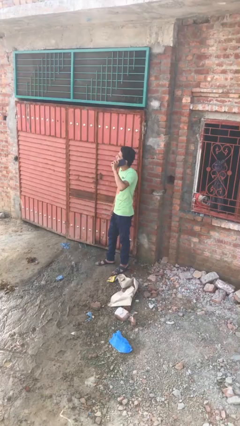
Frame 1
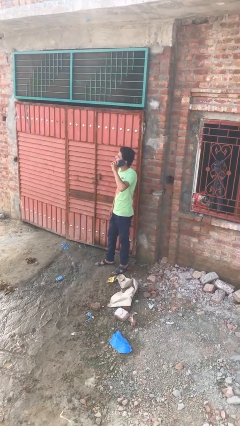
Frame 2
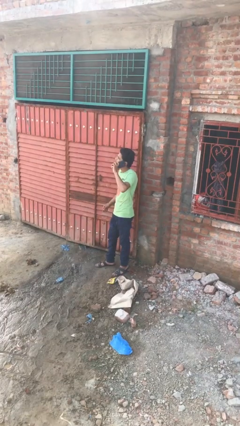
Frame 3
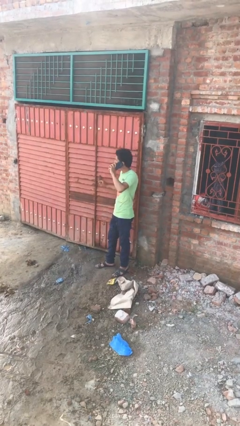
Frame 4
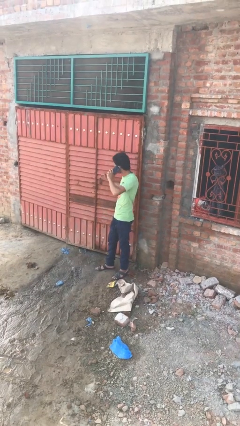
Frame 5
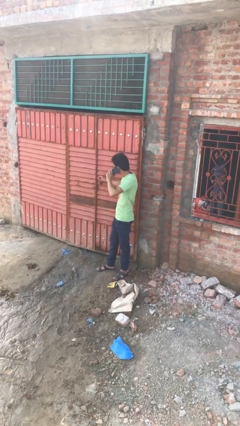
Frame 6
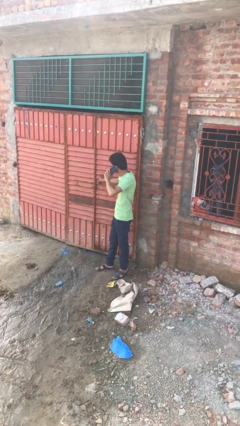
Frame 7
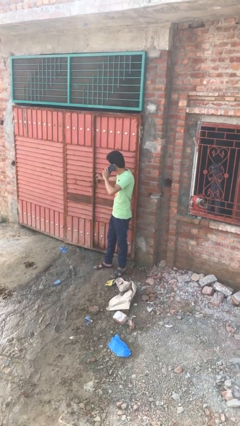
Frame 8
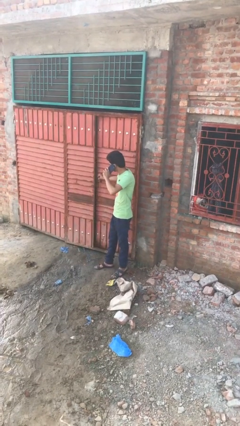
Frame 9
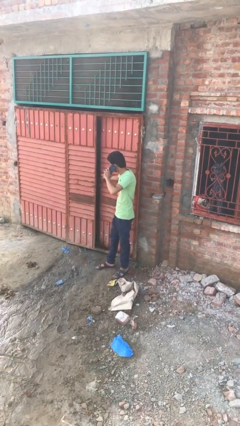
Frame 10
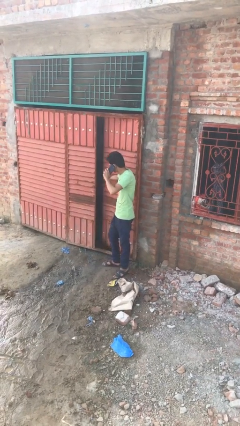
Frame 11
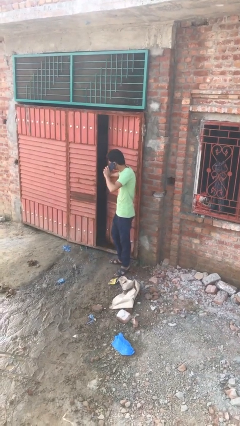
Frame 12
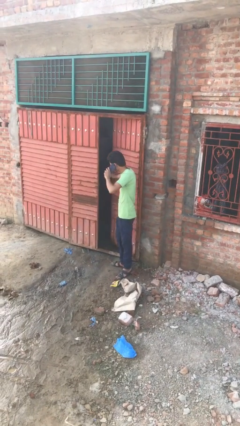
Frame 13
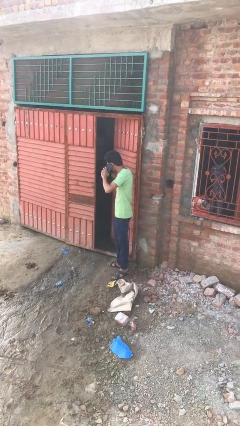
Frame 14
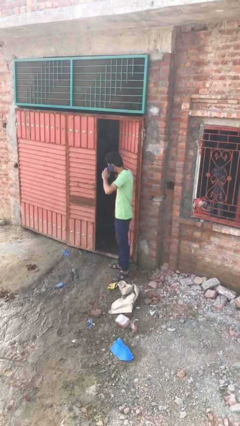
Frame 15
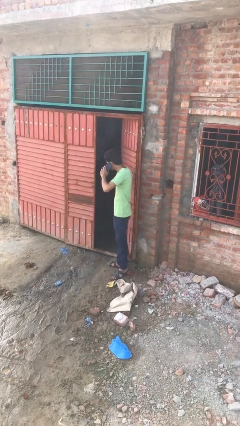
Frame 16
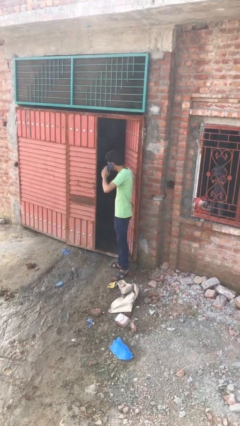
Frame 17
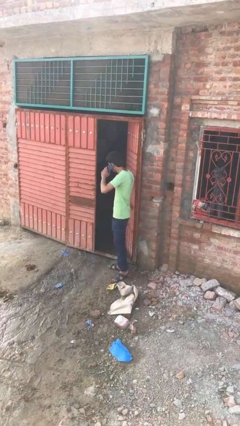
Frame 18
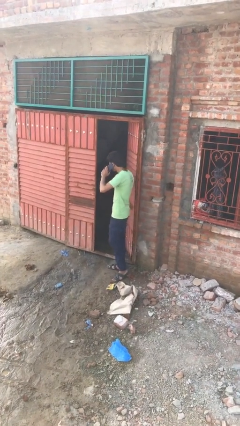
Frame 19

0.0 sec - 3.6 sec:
person opens facility door

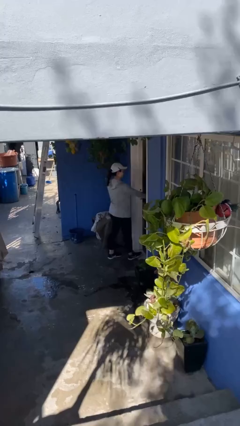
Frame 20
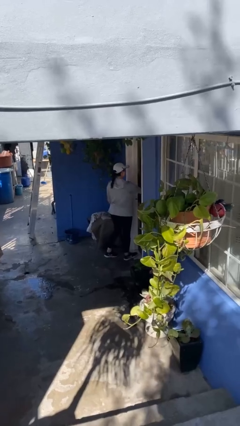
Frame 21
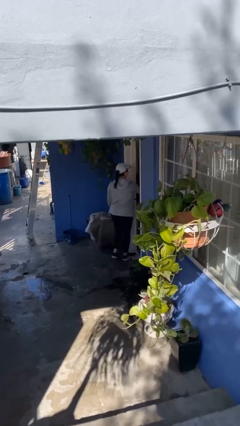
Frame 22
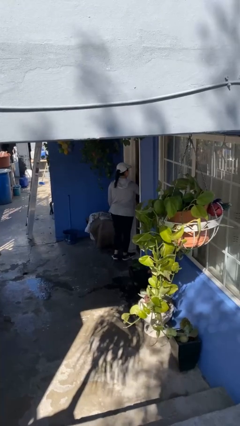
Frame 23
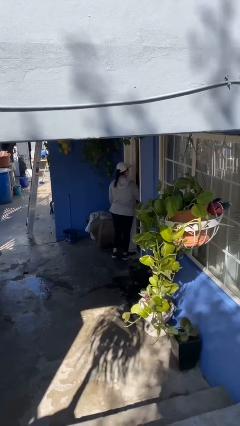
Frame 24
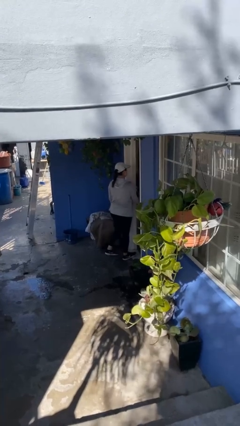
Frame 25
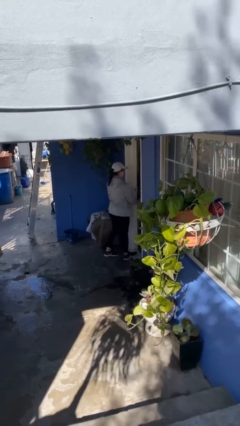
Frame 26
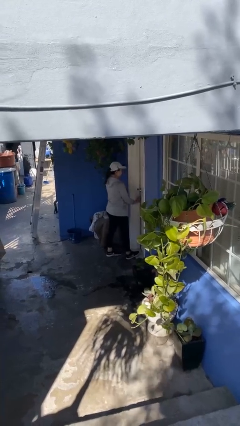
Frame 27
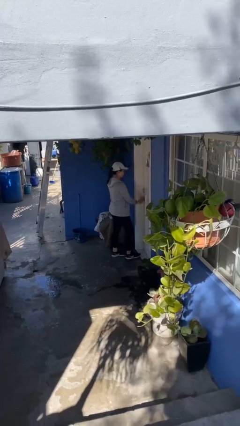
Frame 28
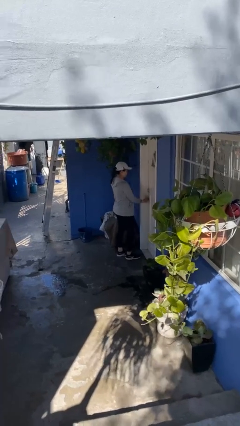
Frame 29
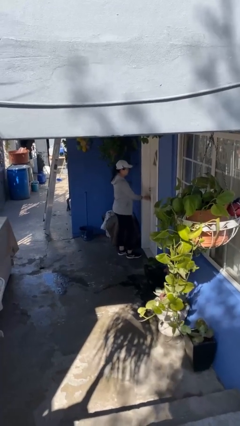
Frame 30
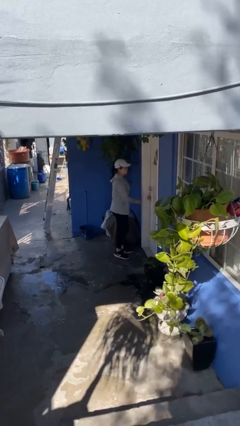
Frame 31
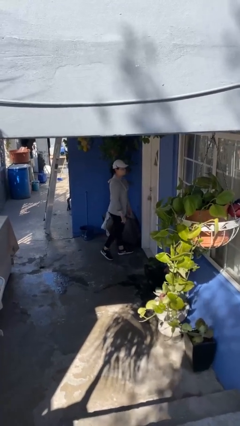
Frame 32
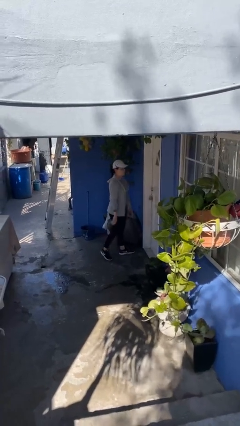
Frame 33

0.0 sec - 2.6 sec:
person closes facility door

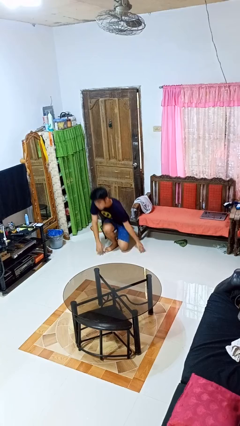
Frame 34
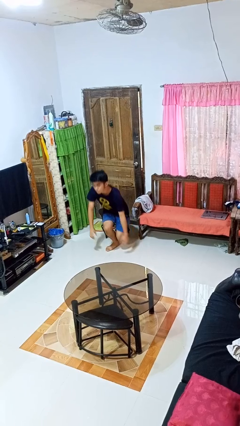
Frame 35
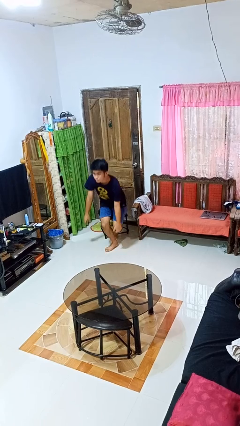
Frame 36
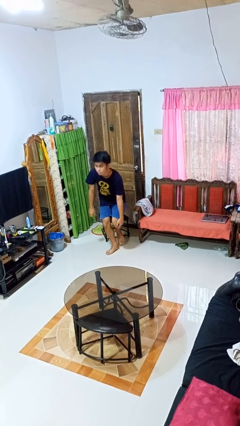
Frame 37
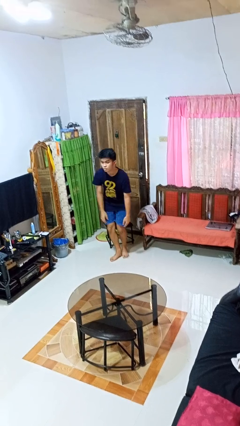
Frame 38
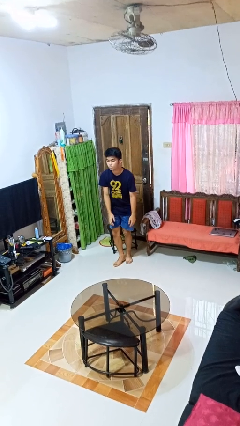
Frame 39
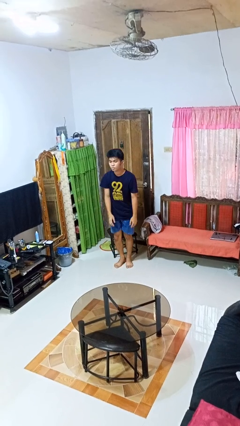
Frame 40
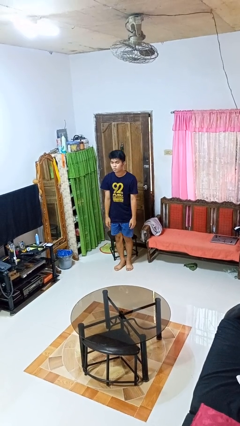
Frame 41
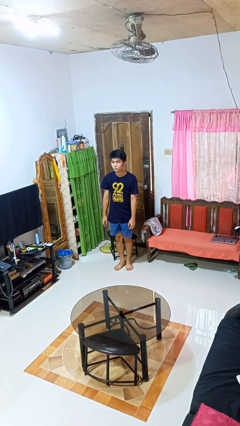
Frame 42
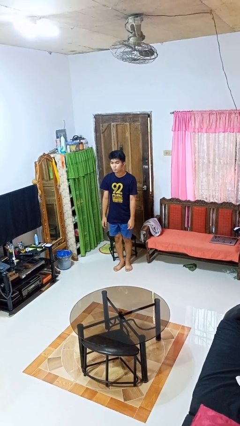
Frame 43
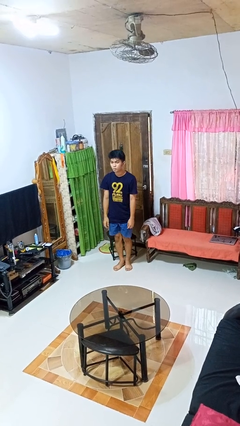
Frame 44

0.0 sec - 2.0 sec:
person stands up from floor

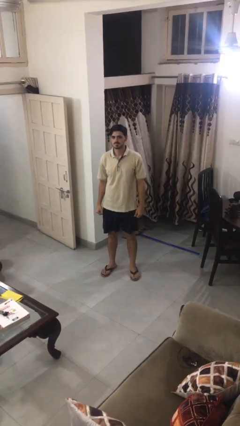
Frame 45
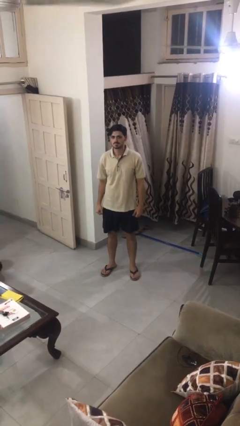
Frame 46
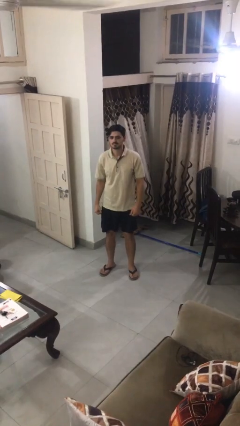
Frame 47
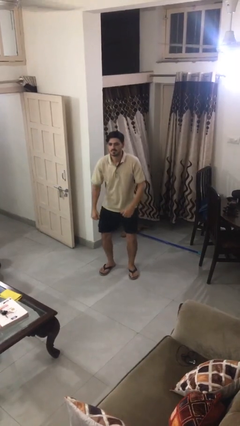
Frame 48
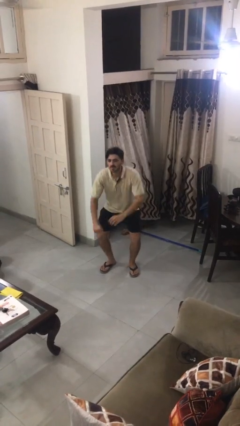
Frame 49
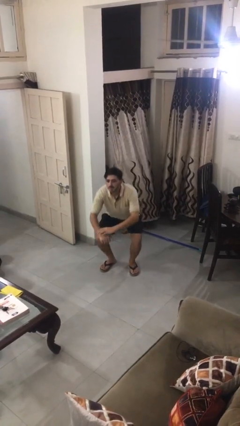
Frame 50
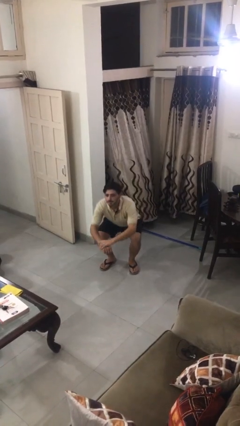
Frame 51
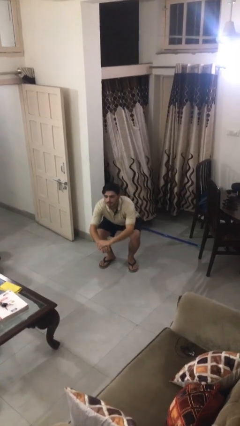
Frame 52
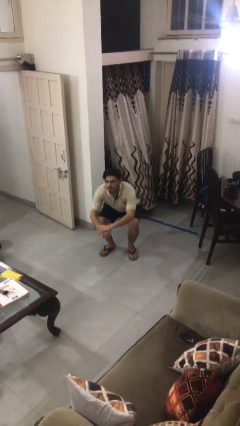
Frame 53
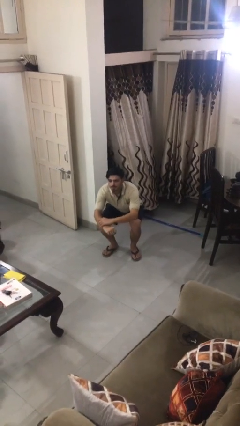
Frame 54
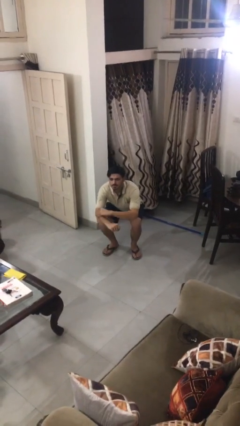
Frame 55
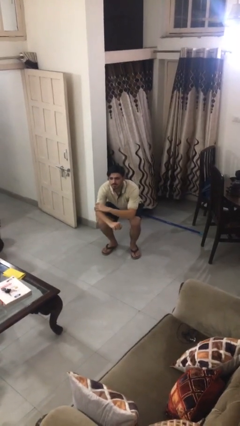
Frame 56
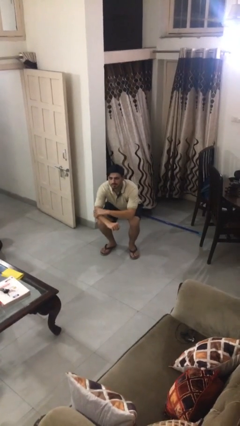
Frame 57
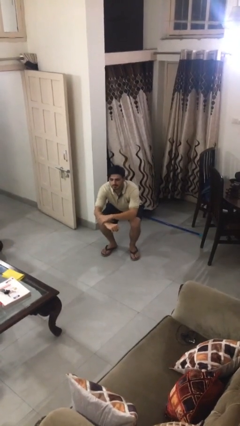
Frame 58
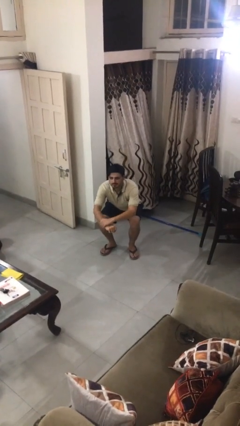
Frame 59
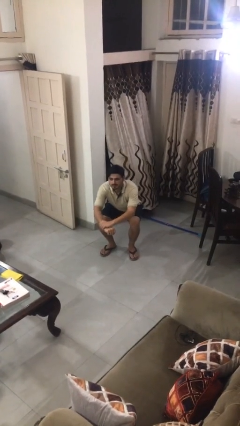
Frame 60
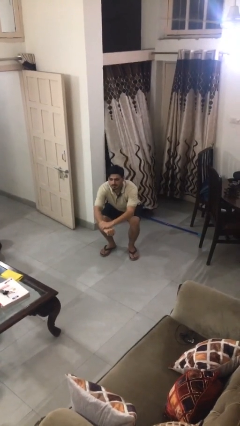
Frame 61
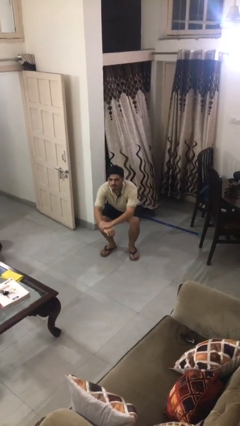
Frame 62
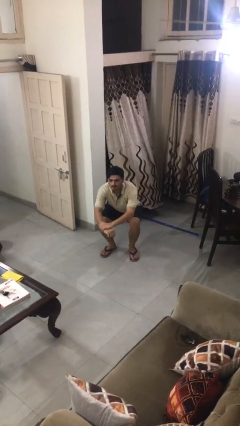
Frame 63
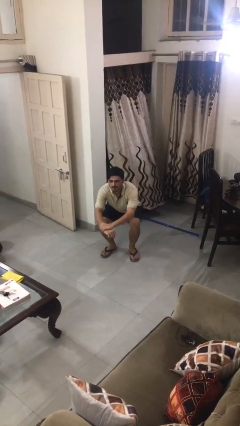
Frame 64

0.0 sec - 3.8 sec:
person squats

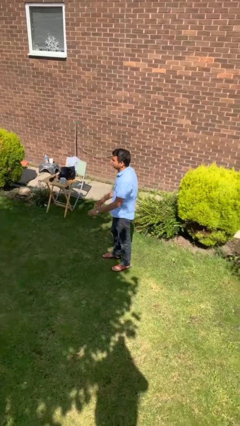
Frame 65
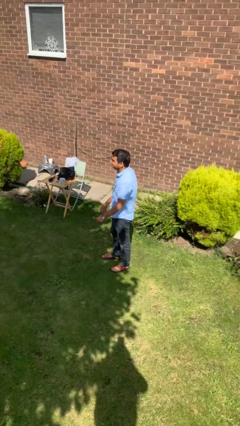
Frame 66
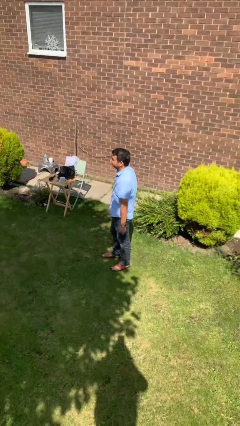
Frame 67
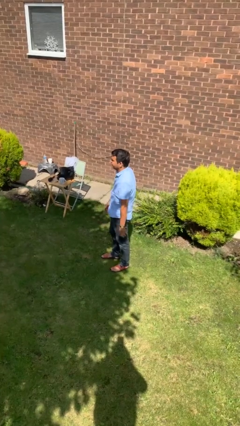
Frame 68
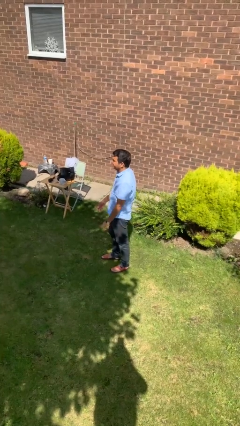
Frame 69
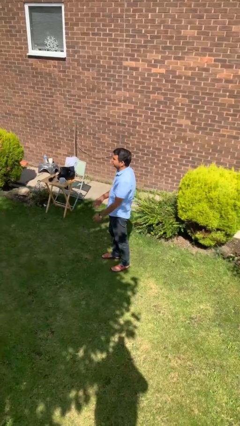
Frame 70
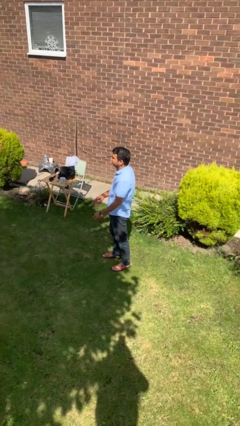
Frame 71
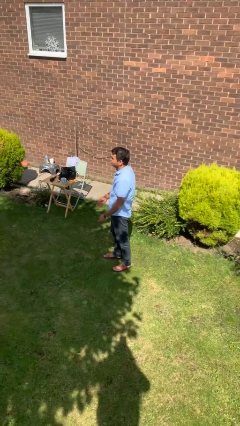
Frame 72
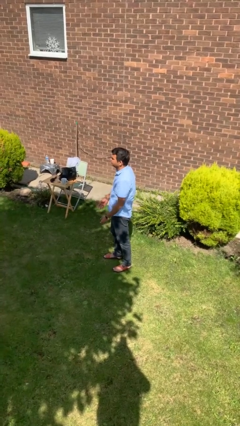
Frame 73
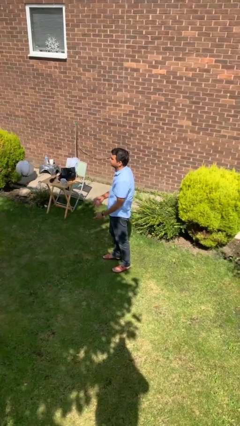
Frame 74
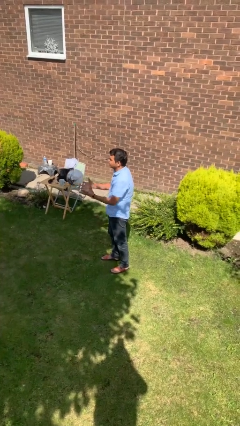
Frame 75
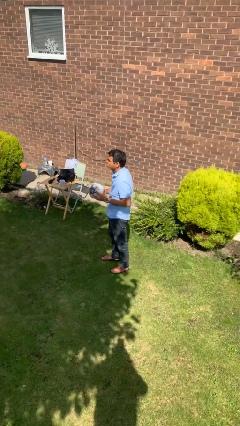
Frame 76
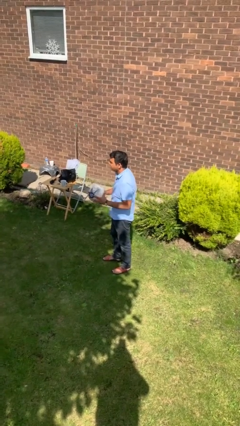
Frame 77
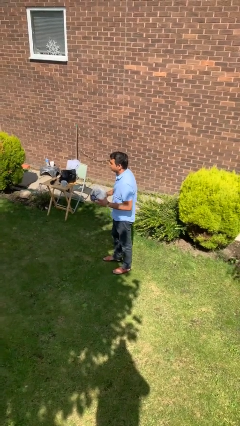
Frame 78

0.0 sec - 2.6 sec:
person catches object from person

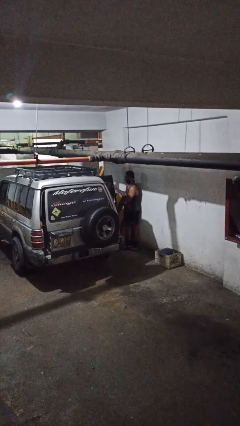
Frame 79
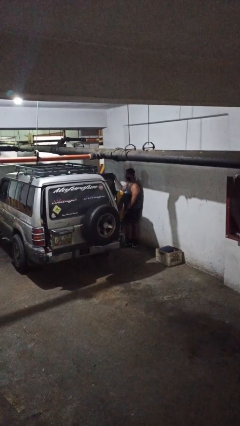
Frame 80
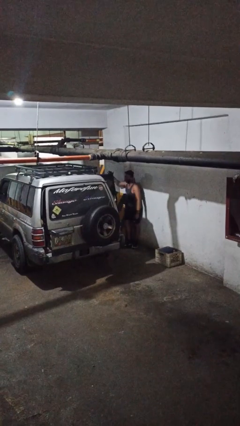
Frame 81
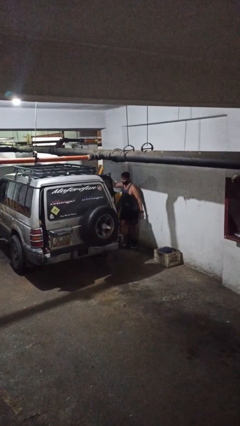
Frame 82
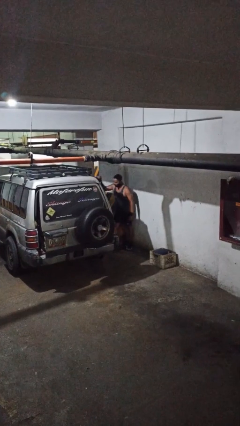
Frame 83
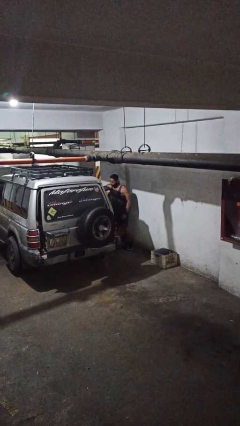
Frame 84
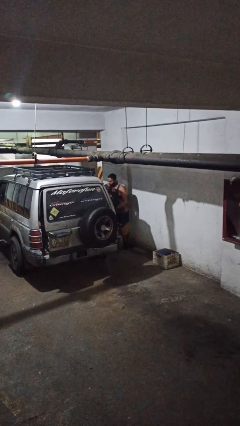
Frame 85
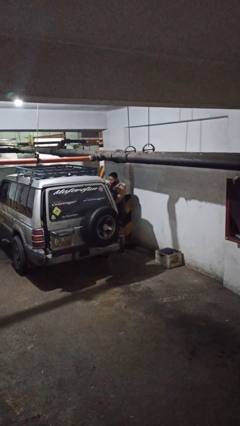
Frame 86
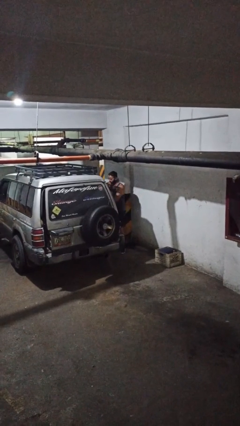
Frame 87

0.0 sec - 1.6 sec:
person closes car door

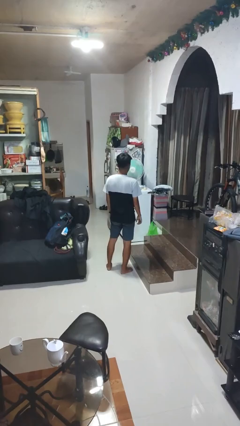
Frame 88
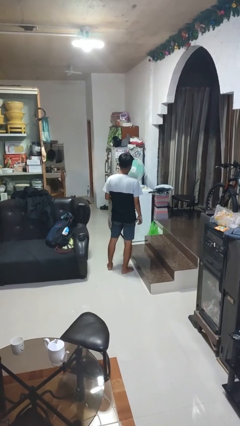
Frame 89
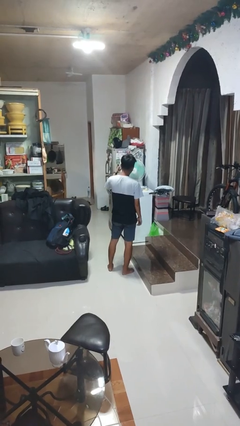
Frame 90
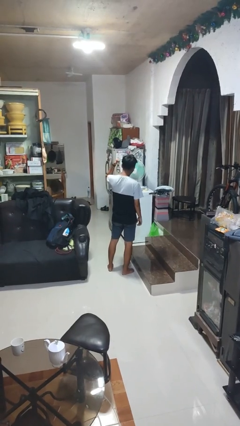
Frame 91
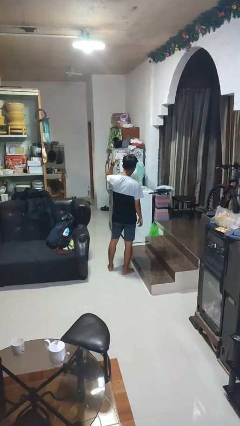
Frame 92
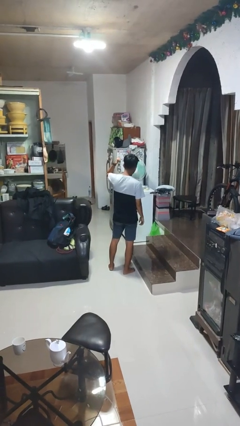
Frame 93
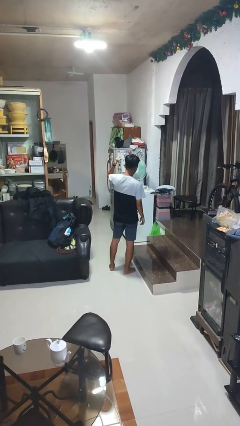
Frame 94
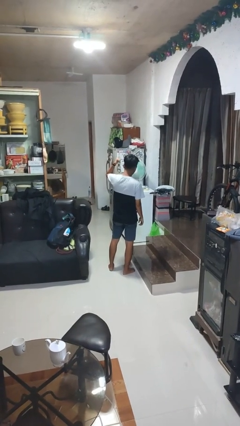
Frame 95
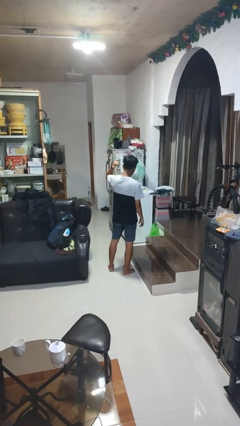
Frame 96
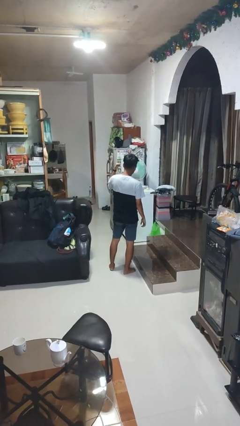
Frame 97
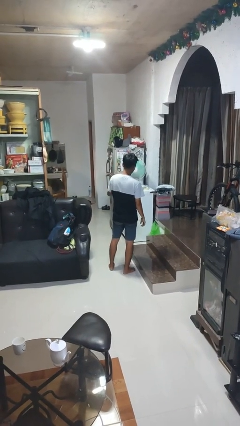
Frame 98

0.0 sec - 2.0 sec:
person gestures behind me
